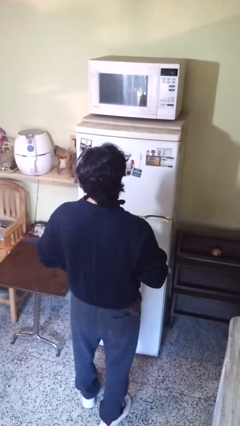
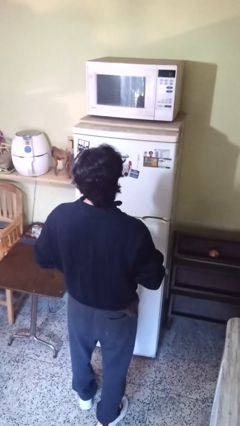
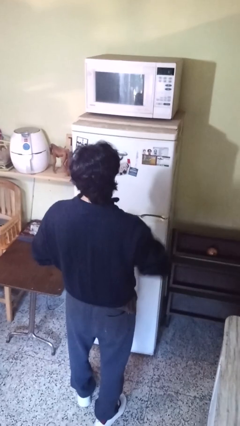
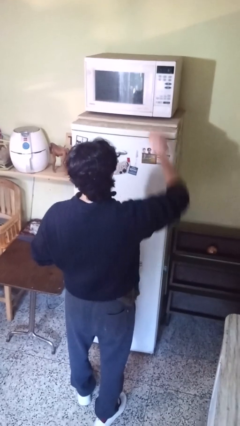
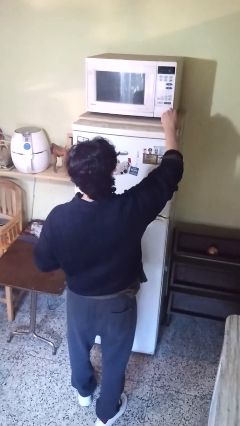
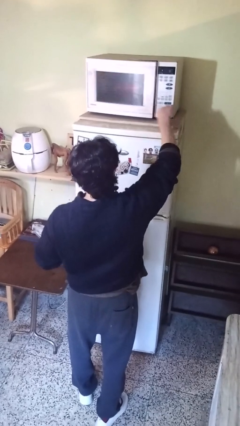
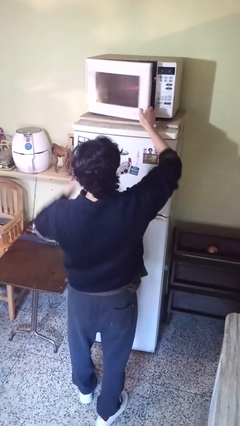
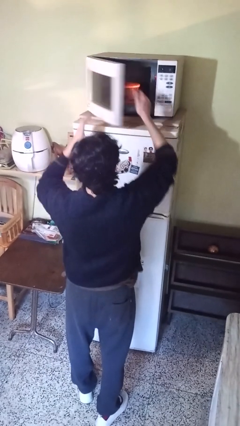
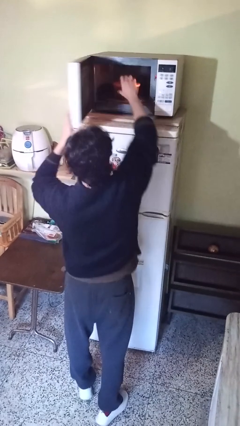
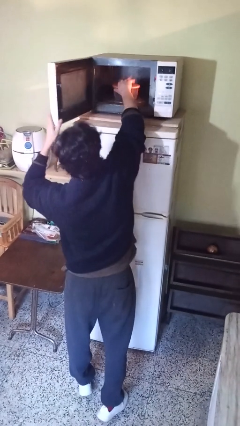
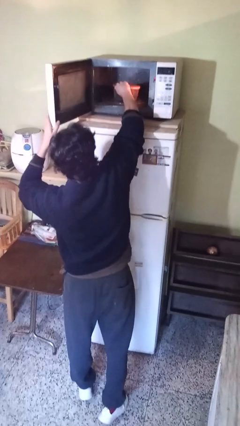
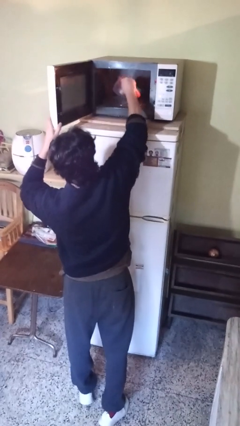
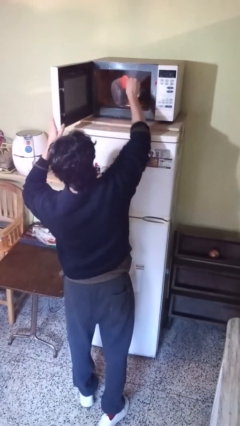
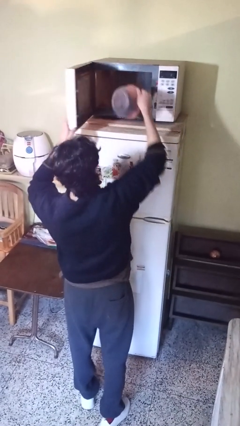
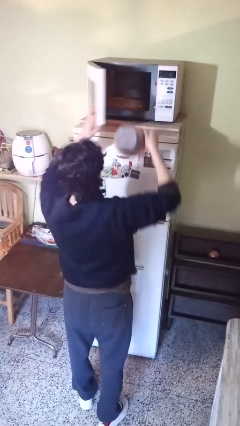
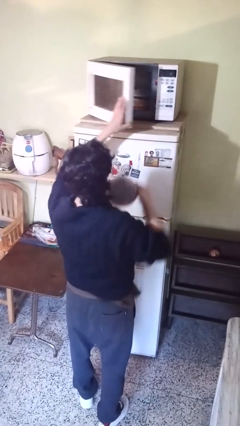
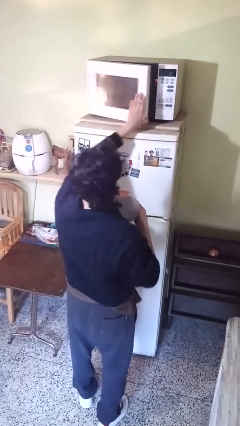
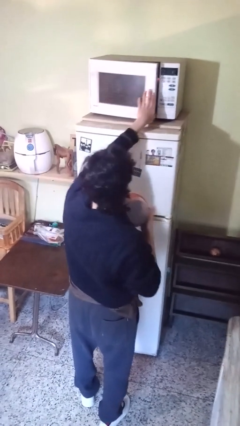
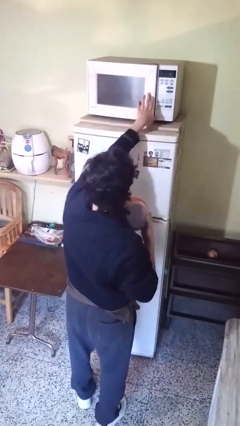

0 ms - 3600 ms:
person takes object from microwave

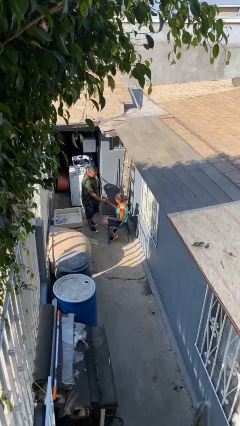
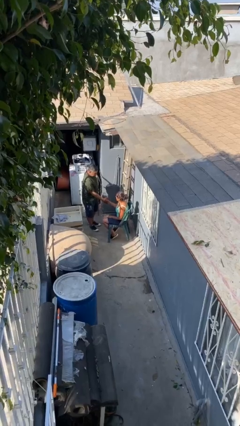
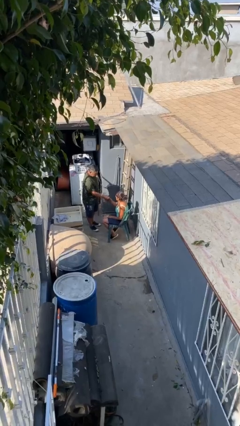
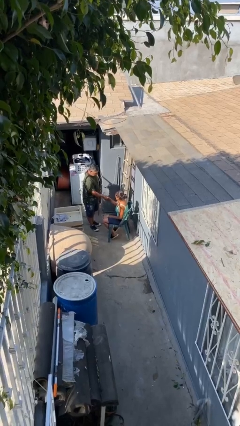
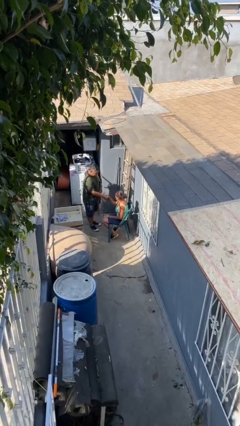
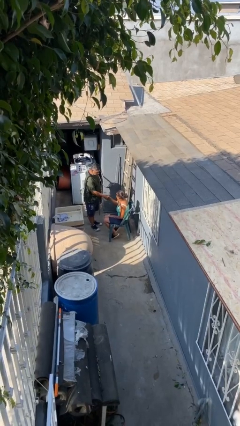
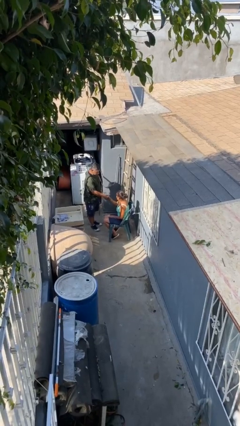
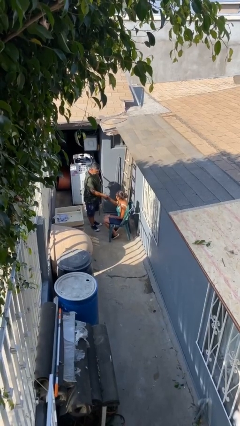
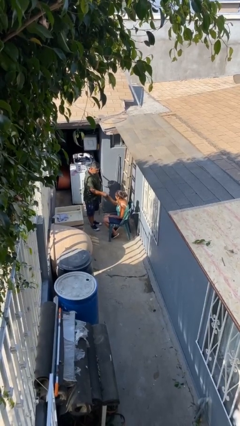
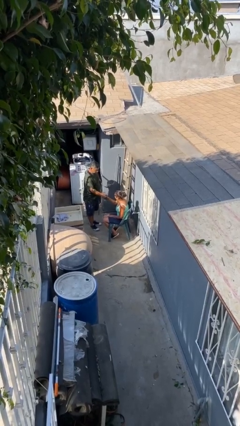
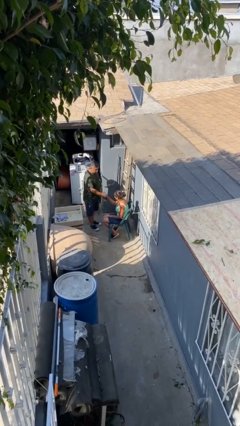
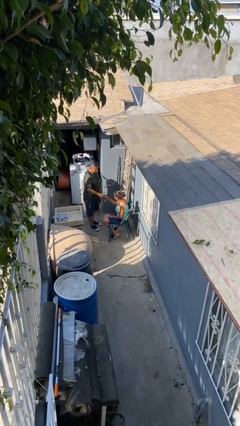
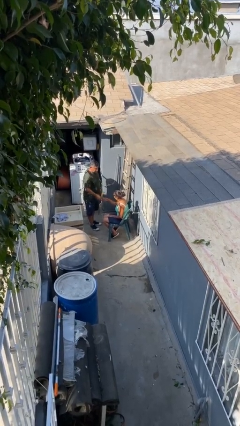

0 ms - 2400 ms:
person shakes hand

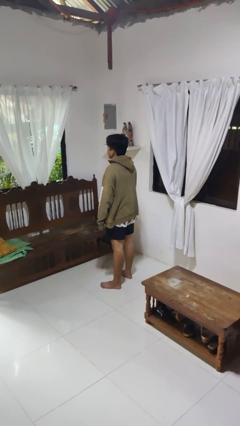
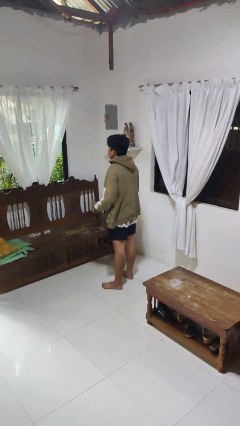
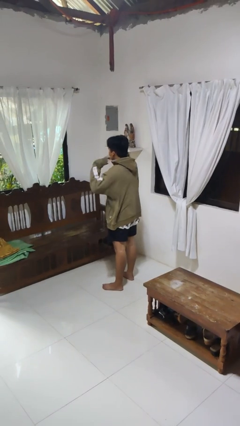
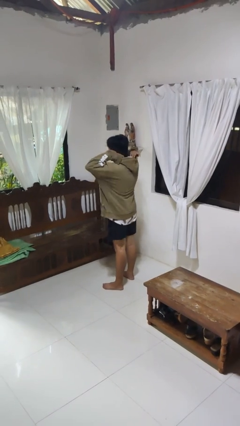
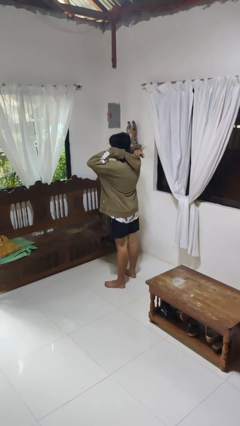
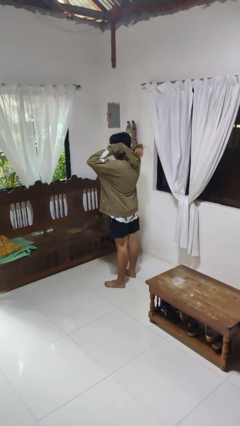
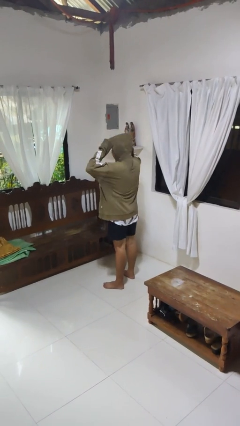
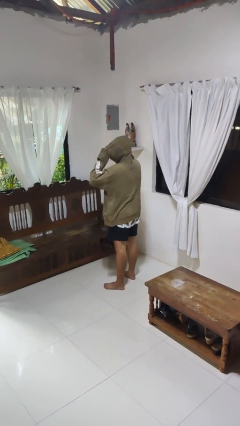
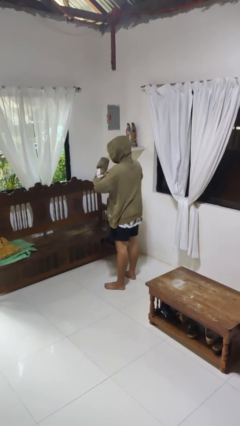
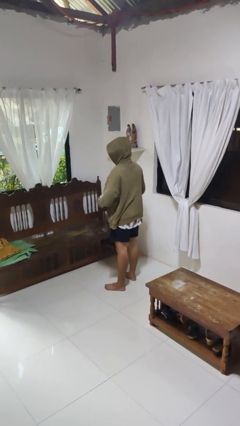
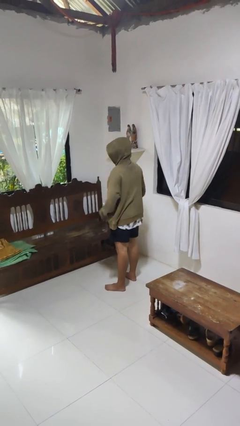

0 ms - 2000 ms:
person puts on hoodie

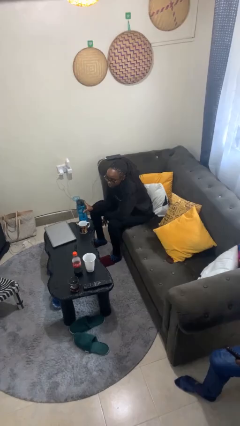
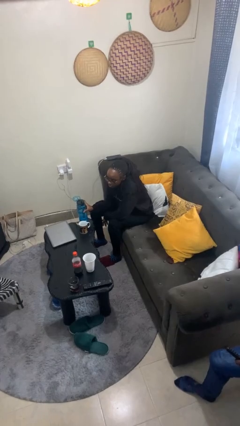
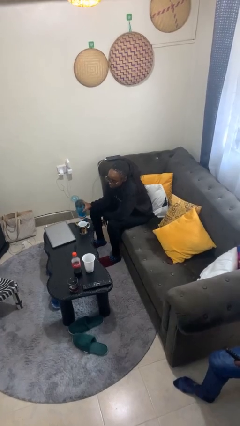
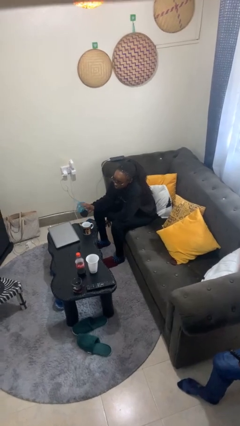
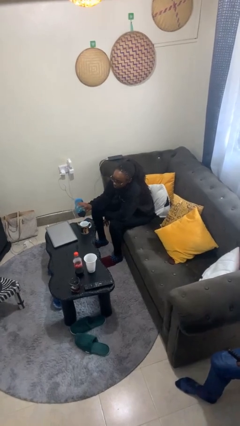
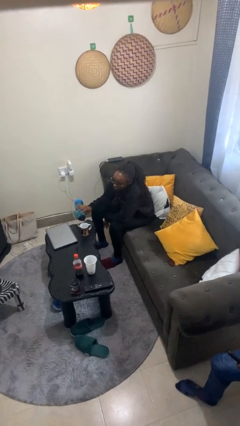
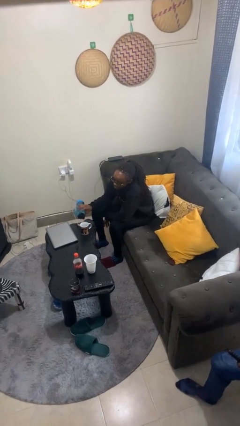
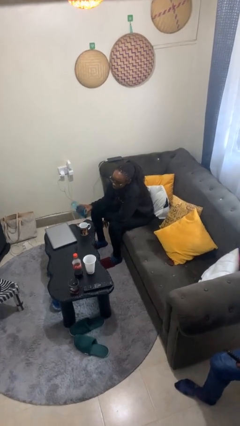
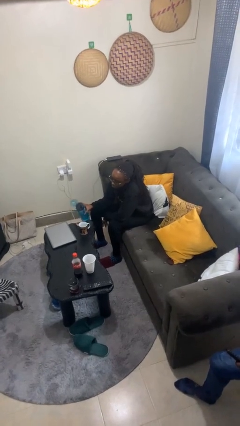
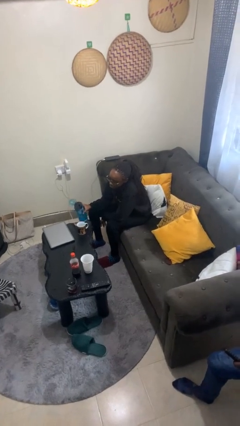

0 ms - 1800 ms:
person pours liquid into cup

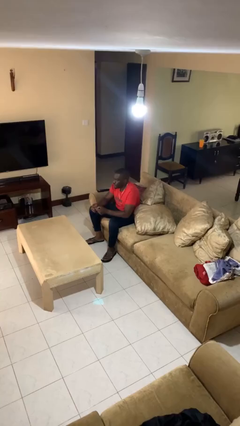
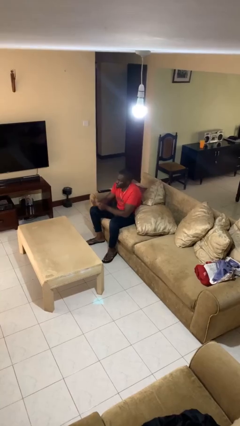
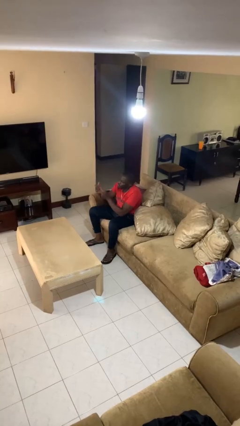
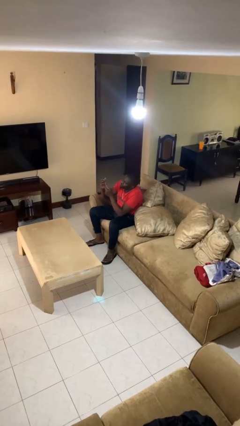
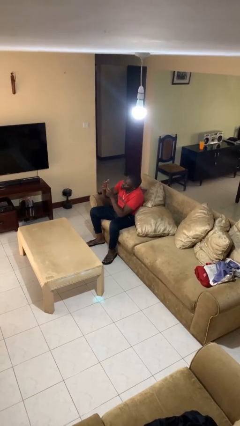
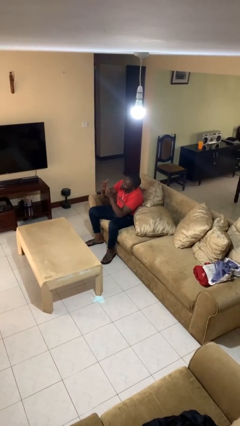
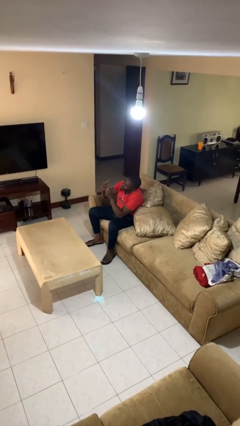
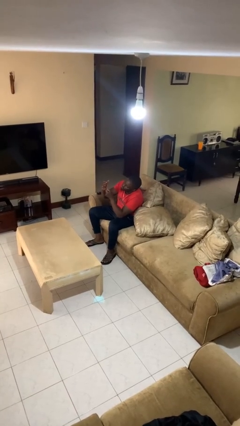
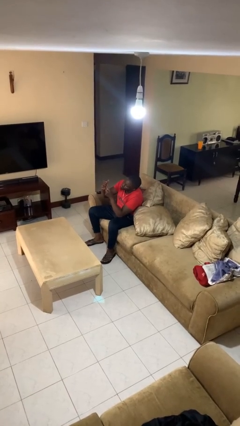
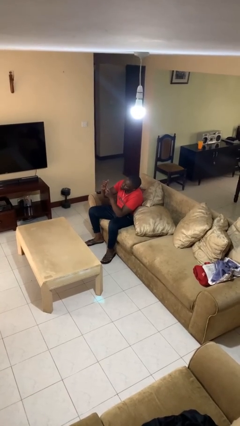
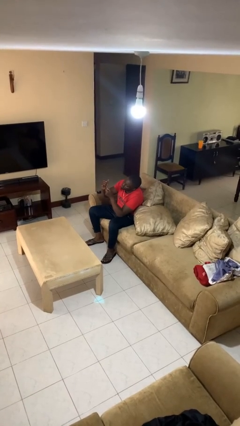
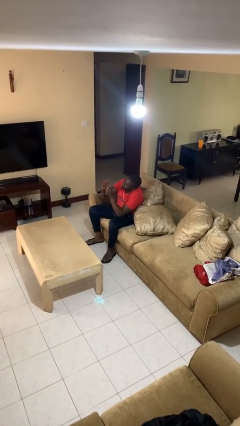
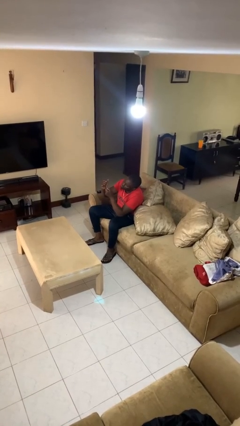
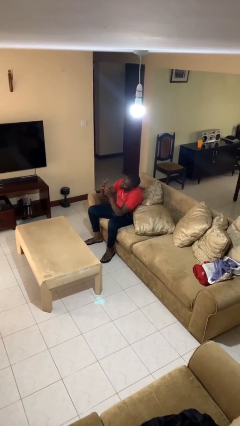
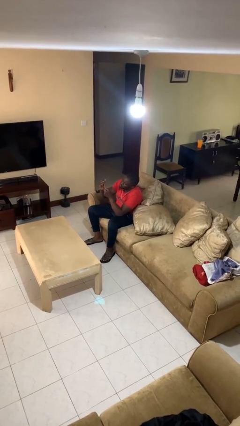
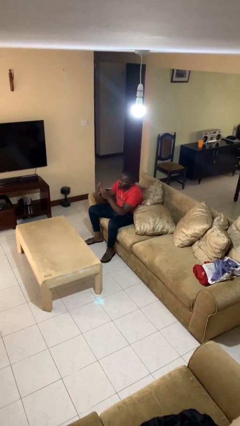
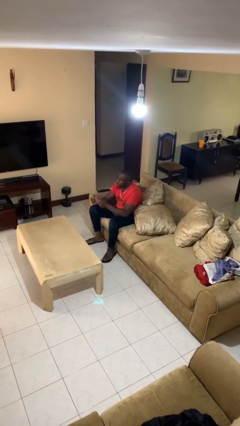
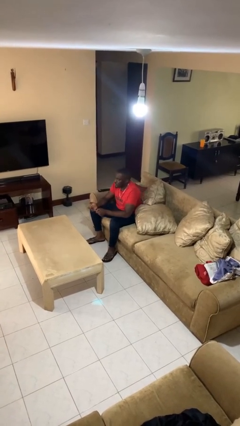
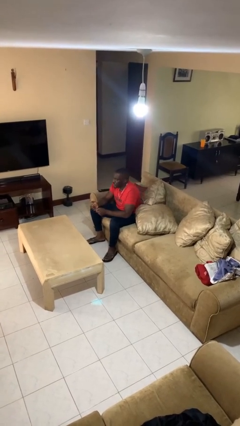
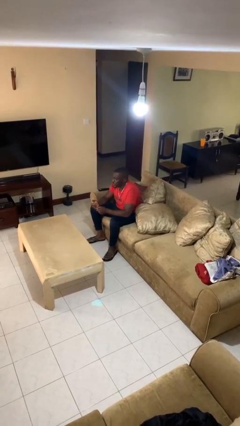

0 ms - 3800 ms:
person clips fingernails

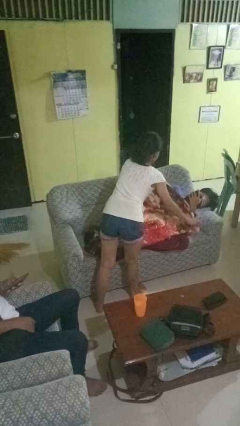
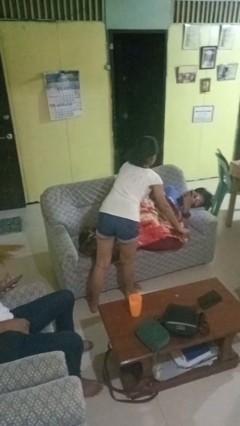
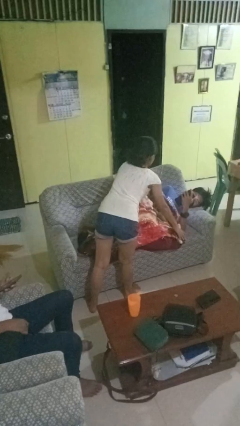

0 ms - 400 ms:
person covers friend with blanket

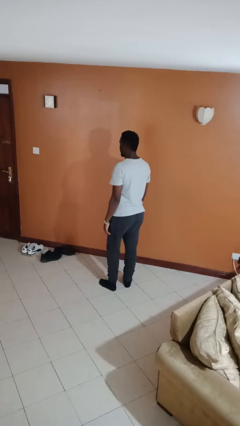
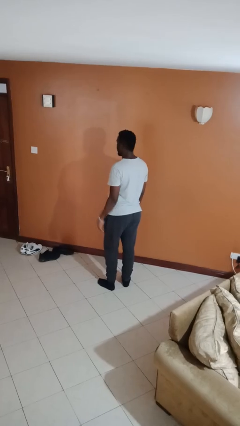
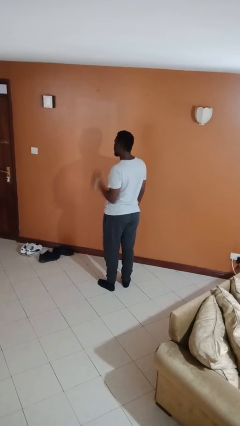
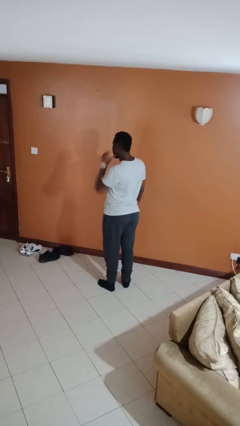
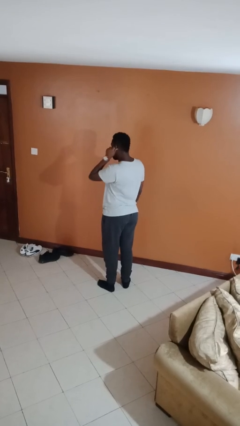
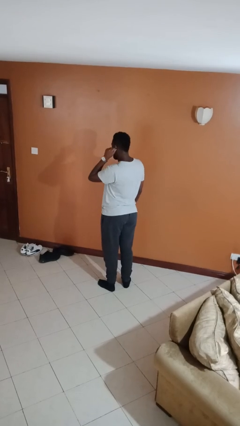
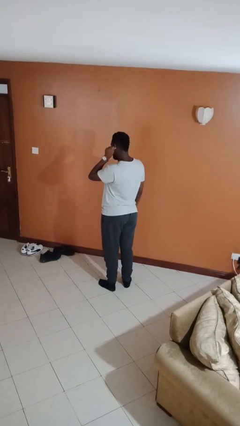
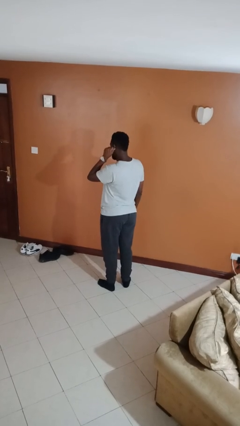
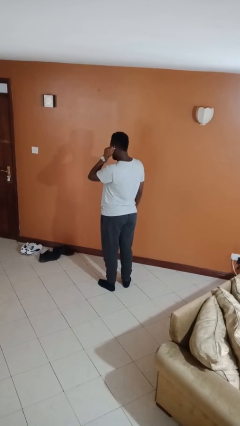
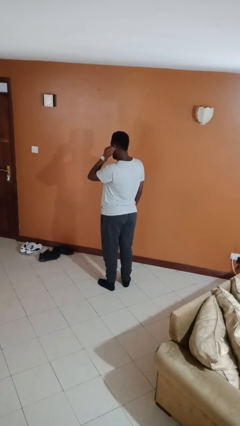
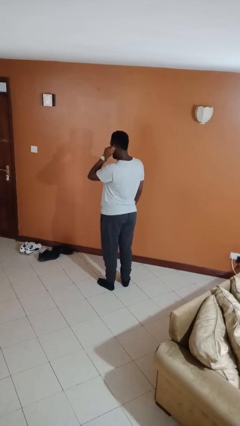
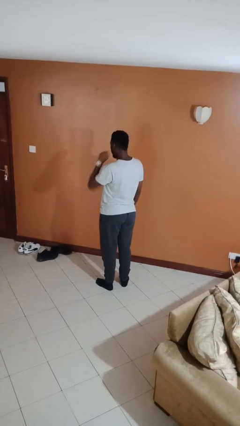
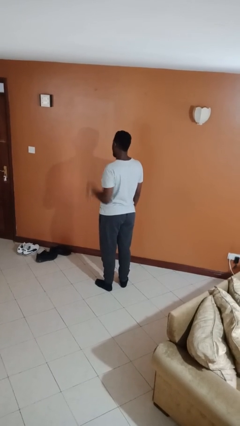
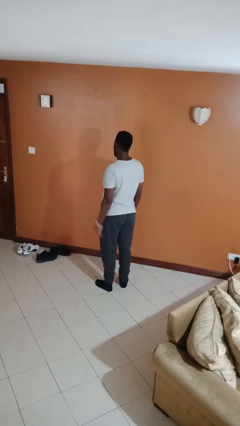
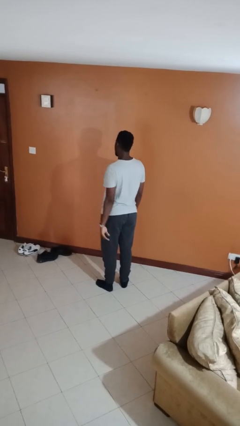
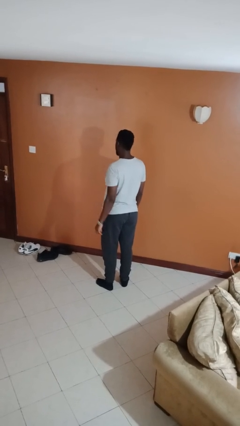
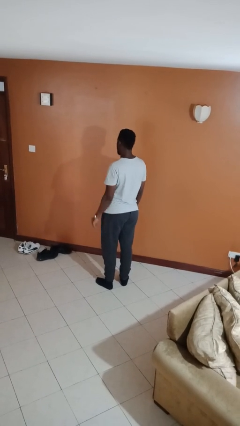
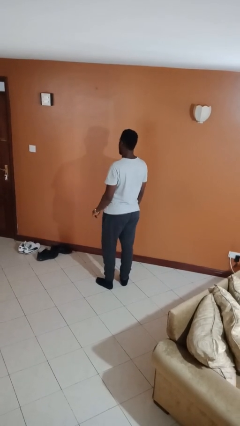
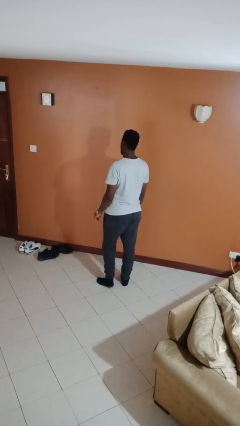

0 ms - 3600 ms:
person touches earlobe
